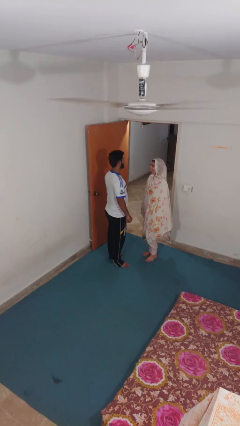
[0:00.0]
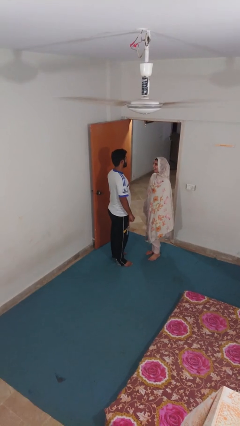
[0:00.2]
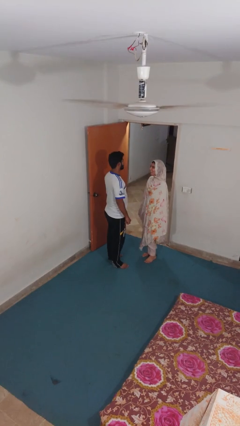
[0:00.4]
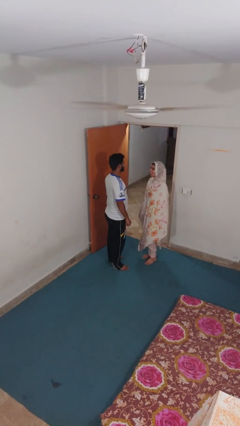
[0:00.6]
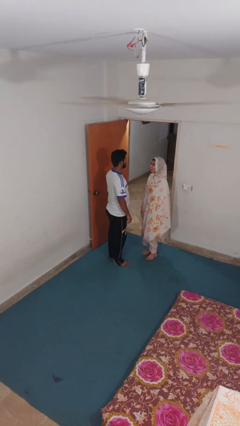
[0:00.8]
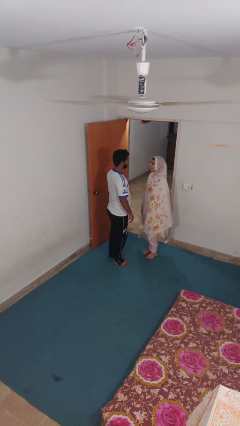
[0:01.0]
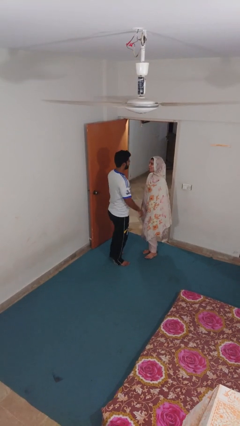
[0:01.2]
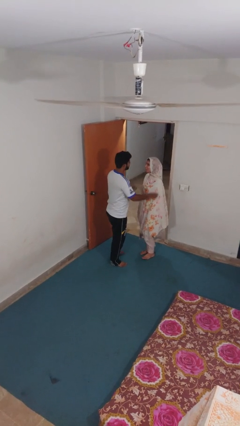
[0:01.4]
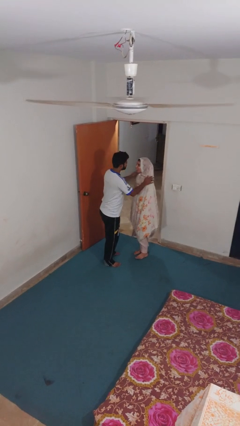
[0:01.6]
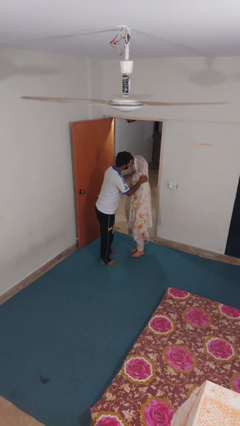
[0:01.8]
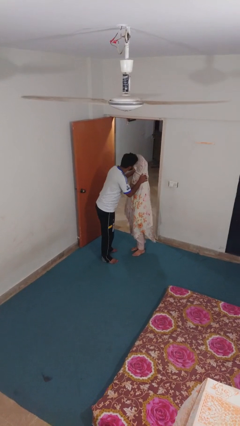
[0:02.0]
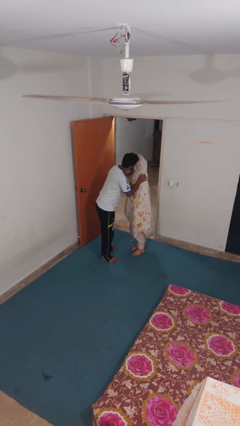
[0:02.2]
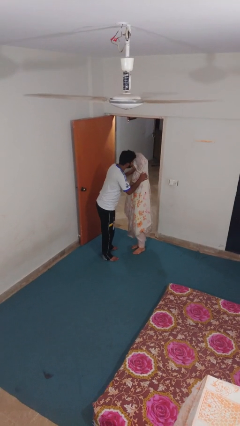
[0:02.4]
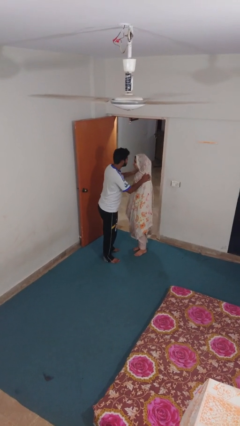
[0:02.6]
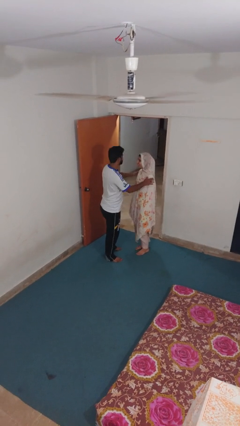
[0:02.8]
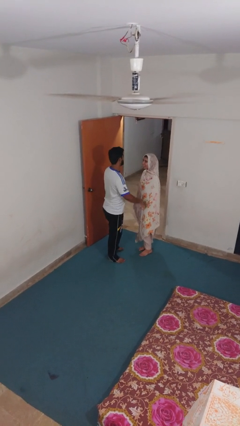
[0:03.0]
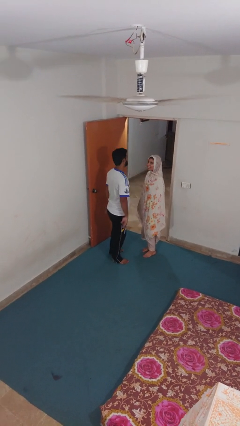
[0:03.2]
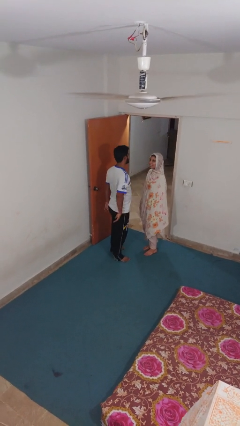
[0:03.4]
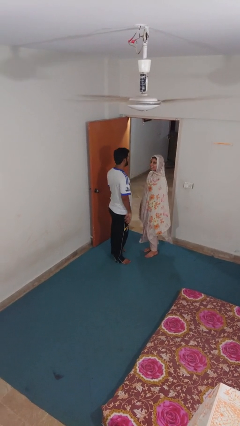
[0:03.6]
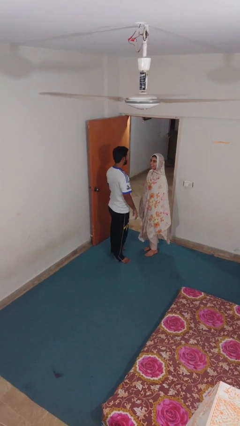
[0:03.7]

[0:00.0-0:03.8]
person kisses cheek of person

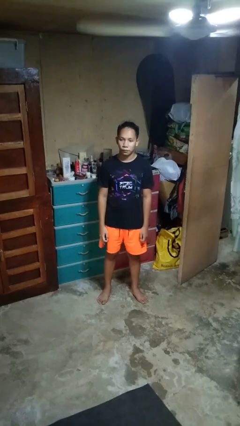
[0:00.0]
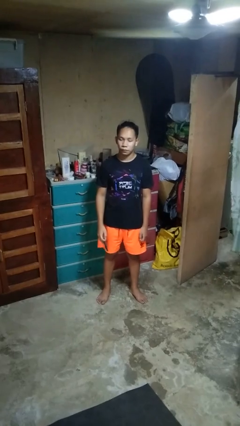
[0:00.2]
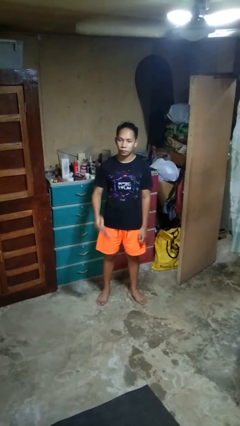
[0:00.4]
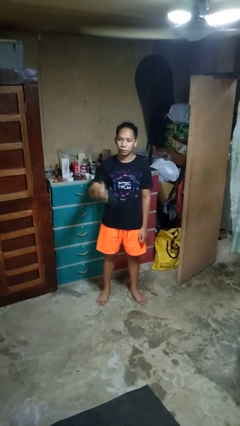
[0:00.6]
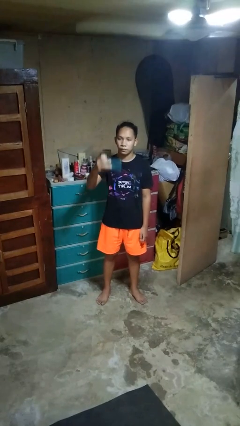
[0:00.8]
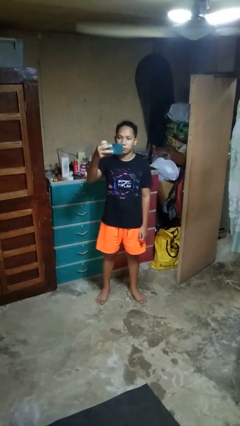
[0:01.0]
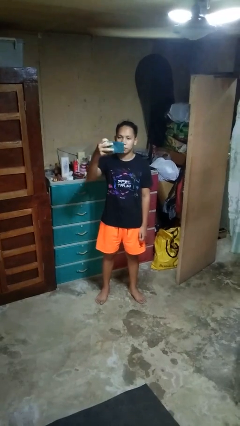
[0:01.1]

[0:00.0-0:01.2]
person takes selfie

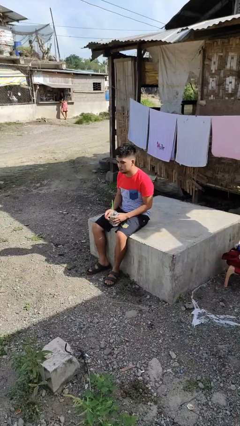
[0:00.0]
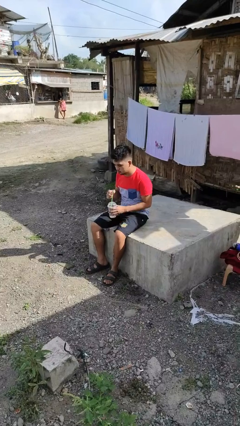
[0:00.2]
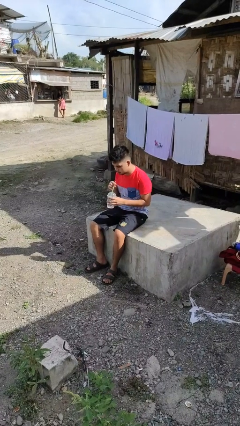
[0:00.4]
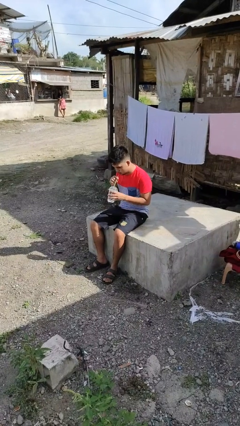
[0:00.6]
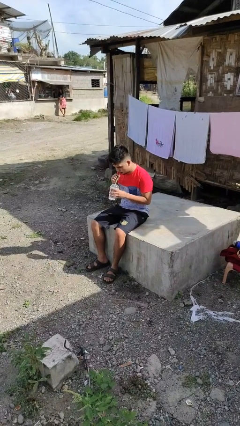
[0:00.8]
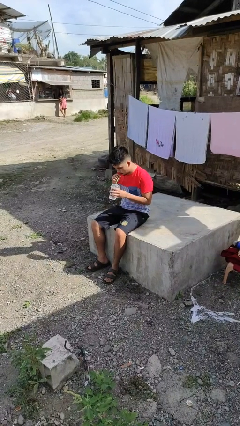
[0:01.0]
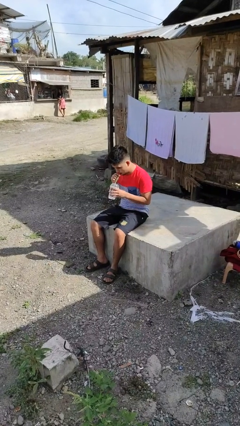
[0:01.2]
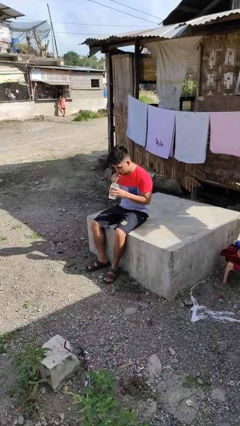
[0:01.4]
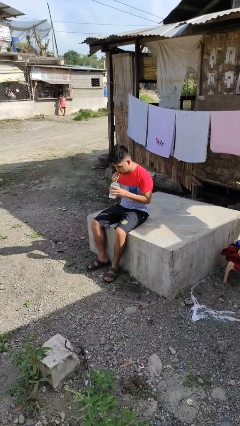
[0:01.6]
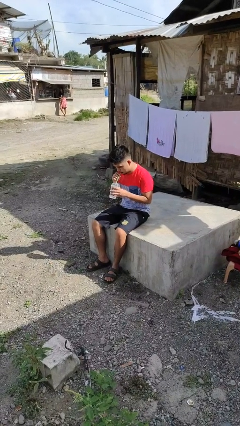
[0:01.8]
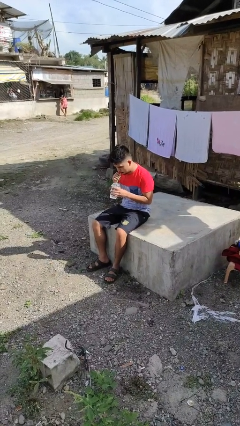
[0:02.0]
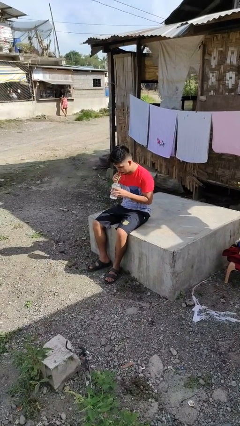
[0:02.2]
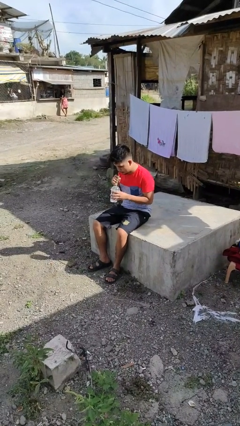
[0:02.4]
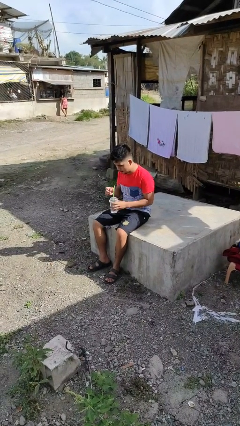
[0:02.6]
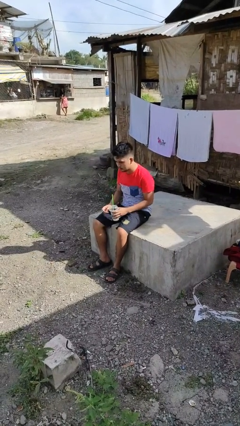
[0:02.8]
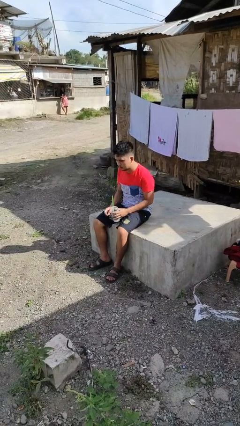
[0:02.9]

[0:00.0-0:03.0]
person drinks from straw

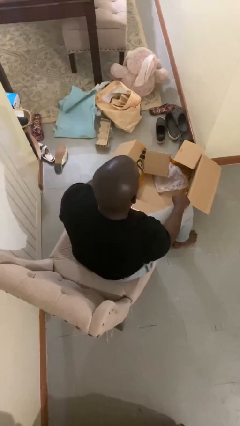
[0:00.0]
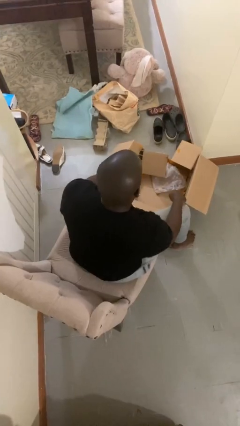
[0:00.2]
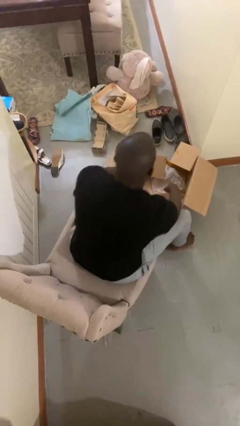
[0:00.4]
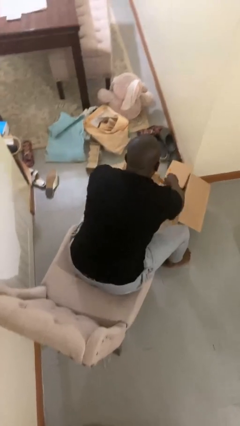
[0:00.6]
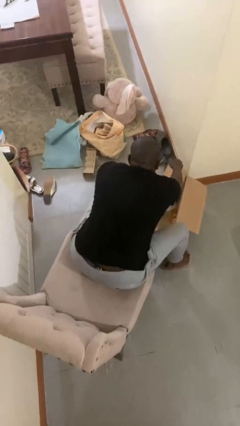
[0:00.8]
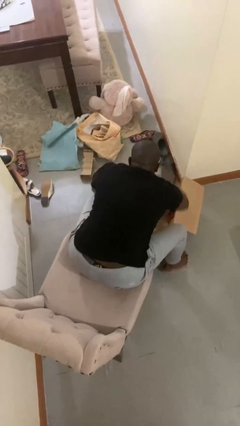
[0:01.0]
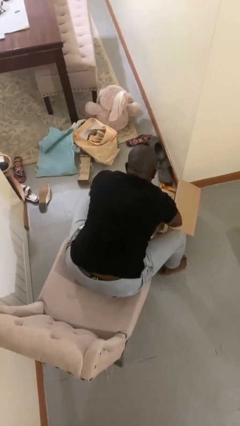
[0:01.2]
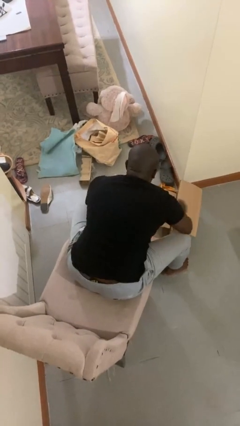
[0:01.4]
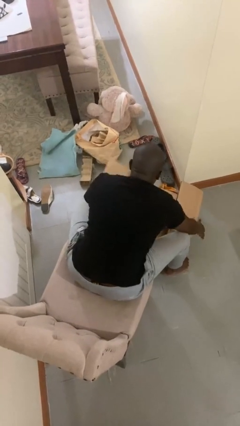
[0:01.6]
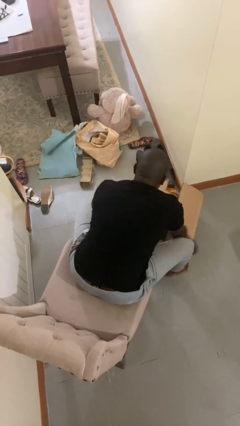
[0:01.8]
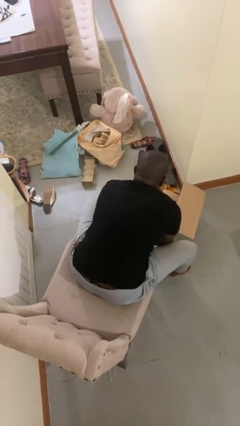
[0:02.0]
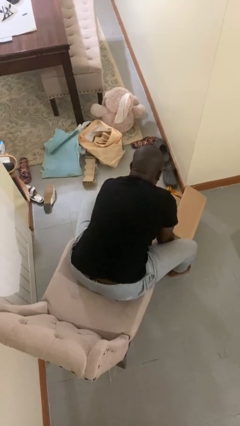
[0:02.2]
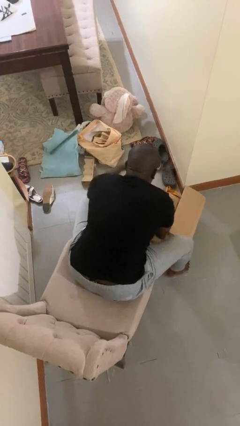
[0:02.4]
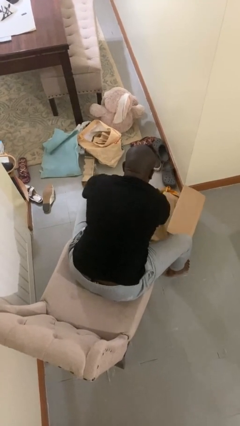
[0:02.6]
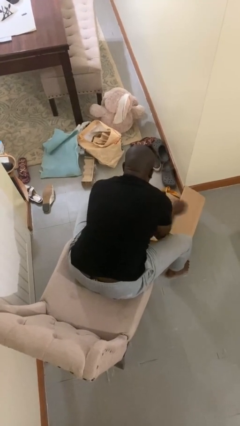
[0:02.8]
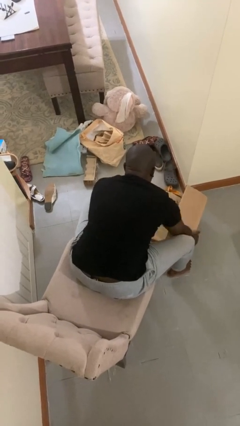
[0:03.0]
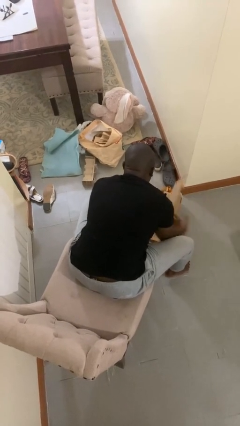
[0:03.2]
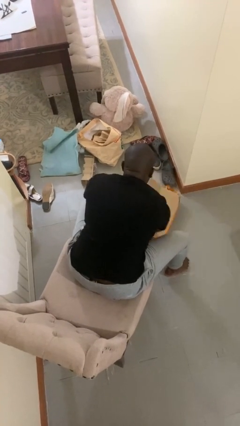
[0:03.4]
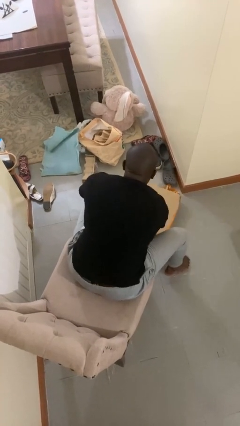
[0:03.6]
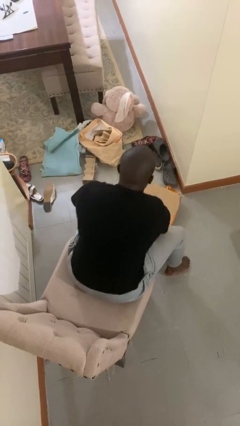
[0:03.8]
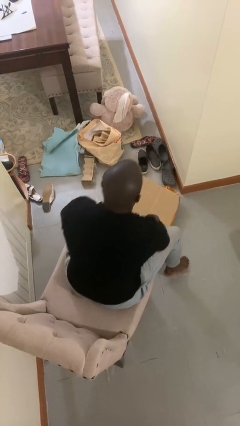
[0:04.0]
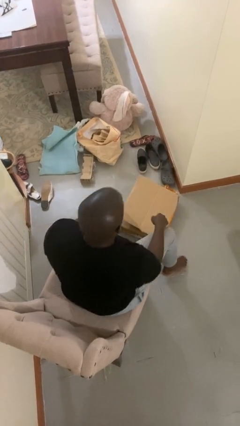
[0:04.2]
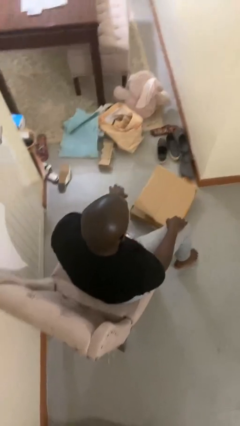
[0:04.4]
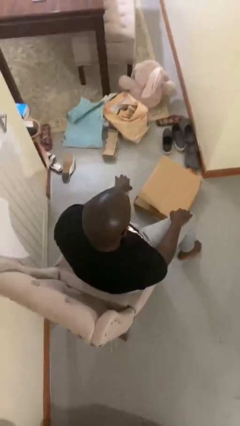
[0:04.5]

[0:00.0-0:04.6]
person closes box

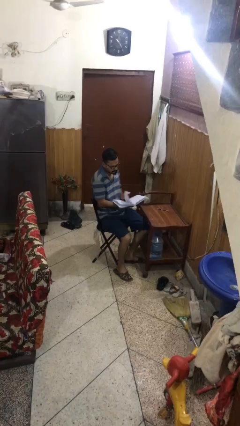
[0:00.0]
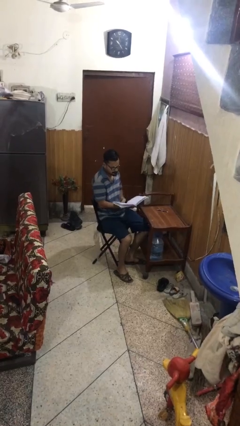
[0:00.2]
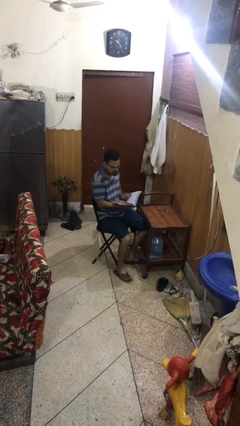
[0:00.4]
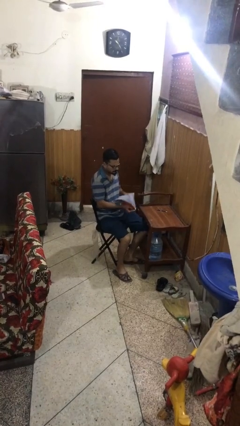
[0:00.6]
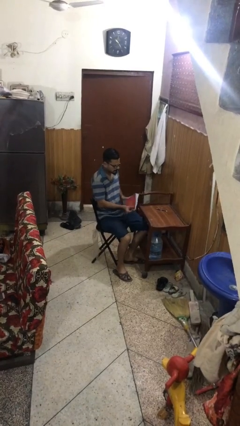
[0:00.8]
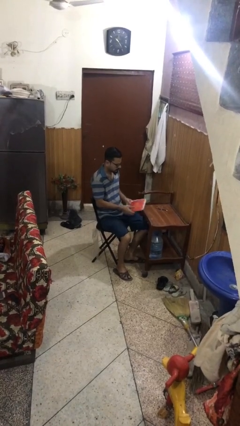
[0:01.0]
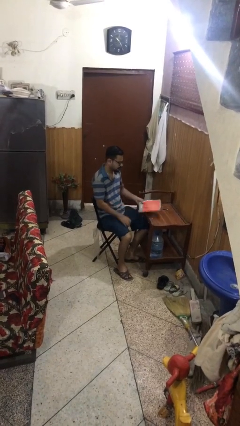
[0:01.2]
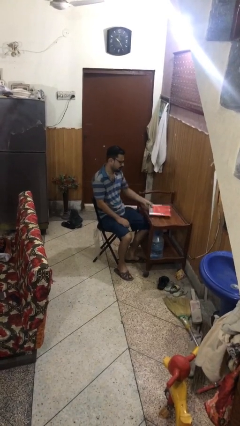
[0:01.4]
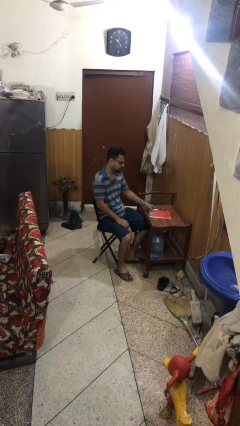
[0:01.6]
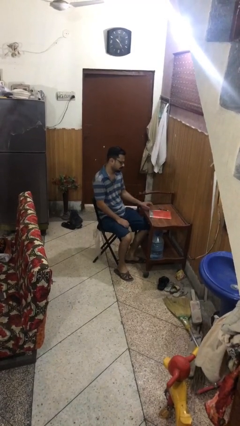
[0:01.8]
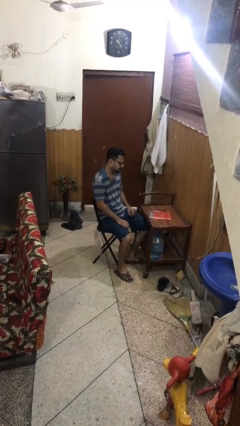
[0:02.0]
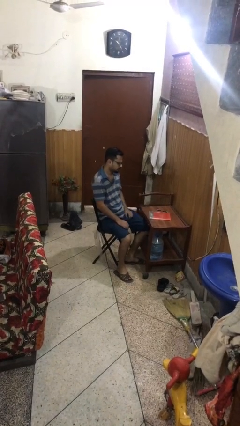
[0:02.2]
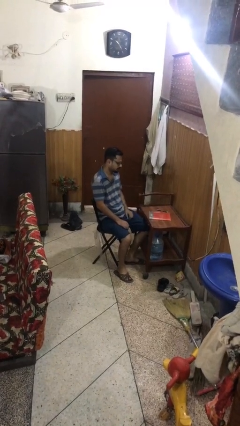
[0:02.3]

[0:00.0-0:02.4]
person puts down object on table

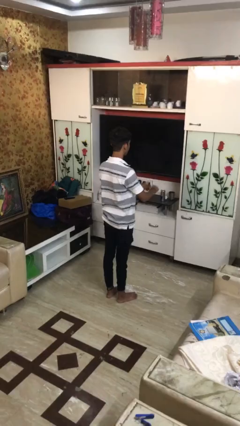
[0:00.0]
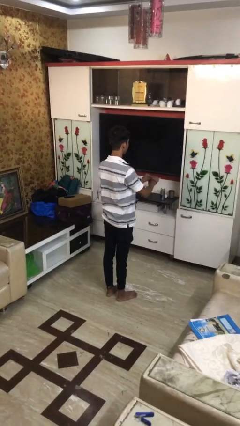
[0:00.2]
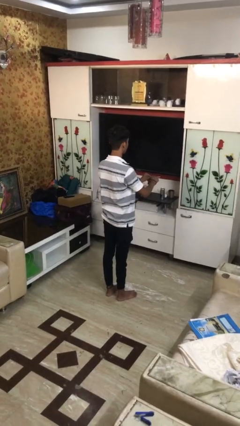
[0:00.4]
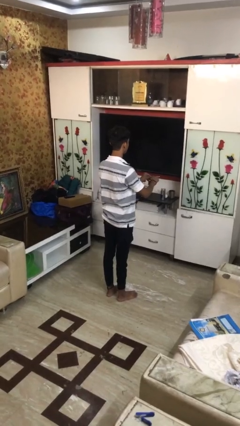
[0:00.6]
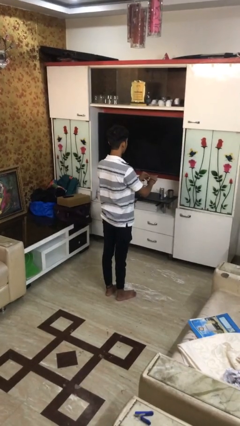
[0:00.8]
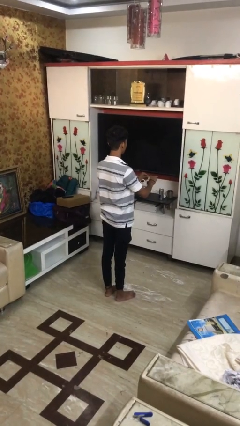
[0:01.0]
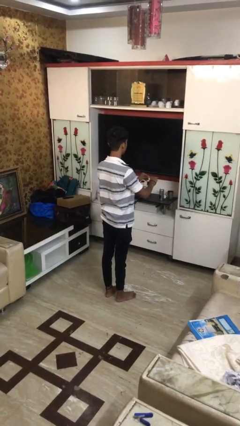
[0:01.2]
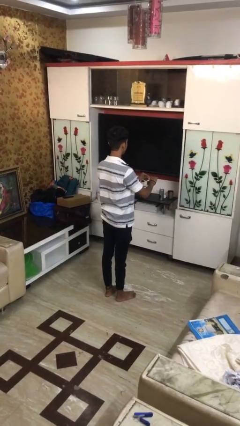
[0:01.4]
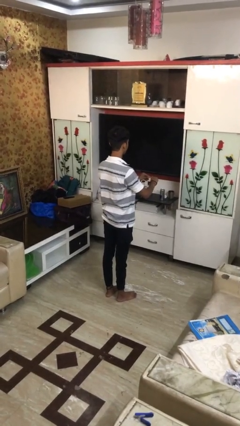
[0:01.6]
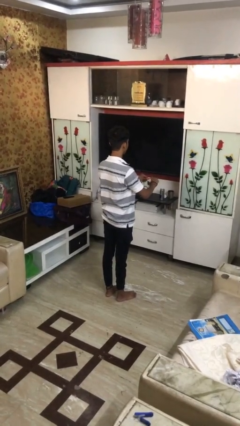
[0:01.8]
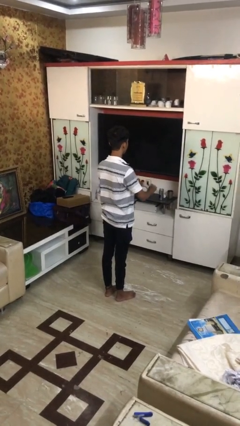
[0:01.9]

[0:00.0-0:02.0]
person files fingernails

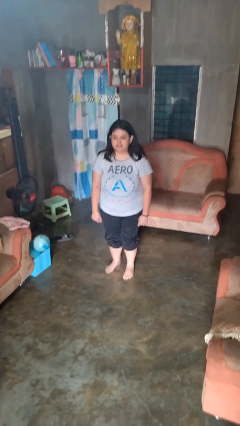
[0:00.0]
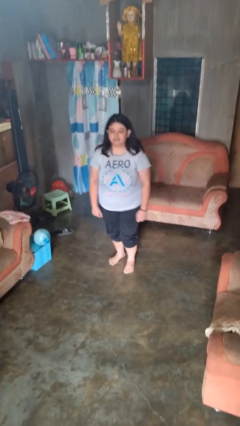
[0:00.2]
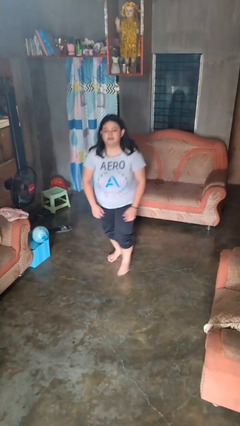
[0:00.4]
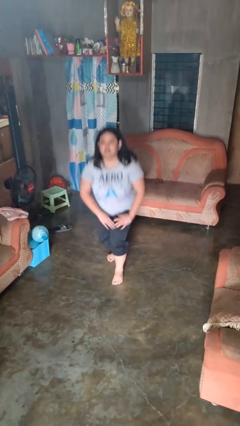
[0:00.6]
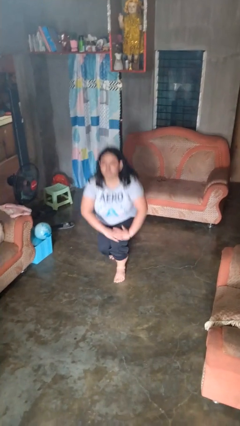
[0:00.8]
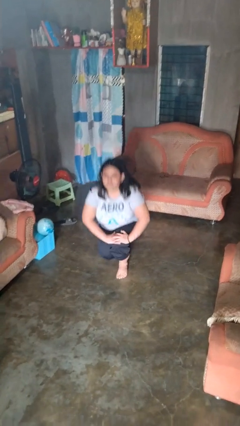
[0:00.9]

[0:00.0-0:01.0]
person kneels
